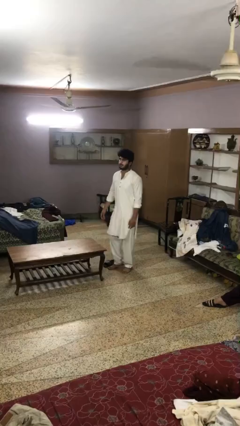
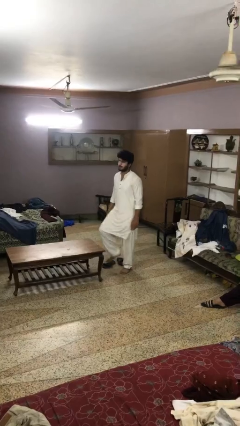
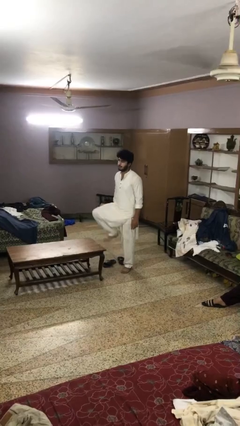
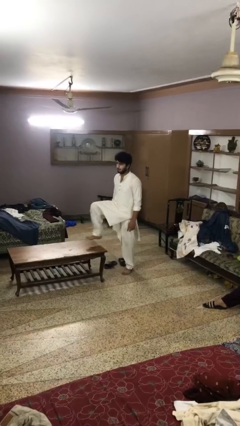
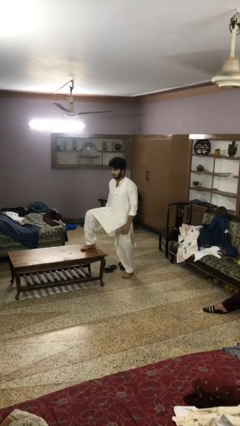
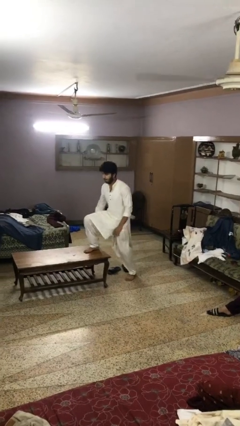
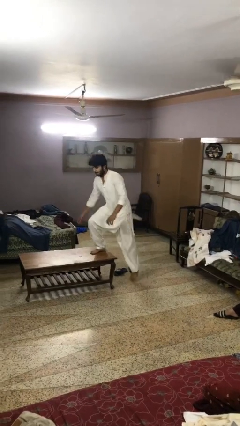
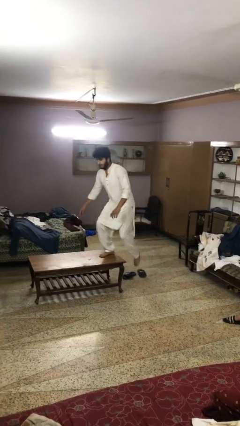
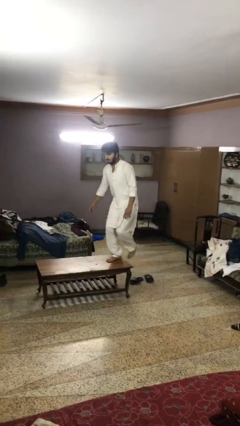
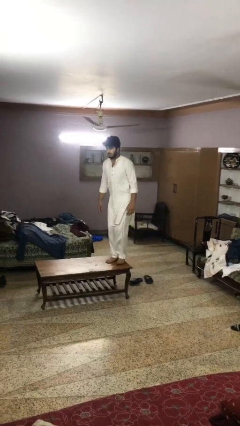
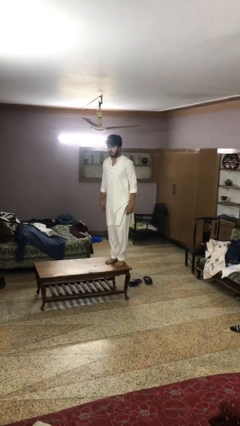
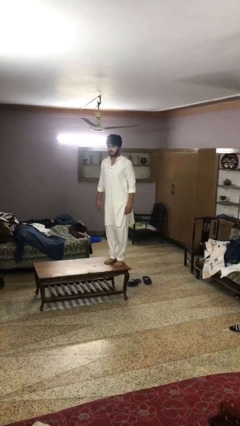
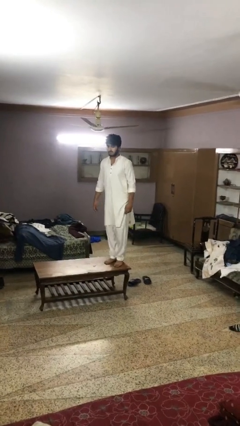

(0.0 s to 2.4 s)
person climbs on table

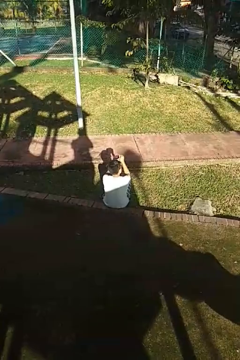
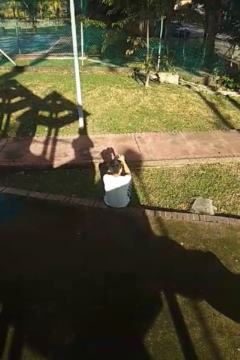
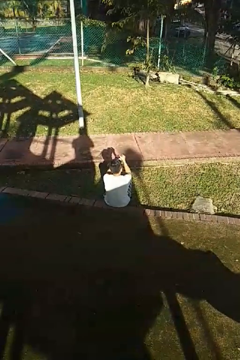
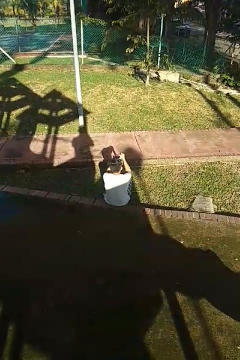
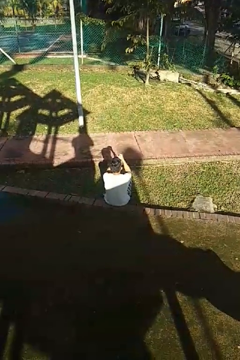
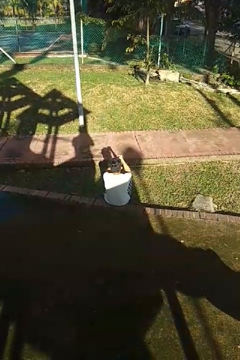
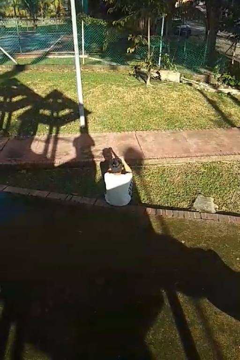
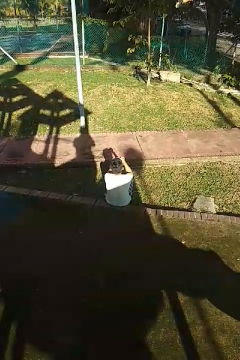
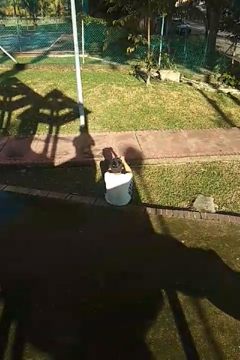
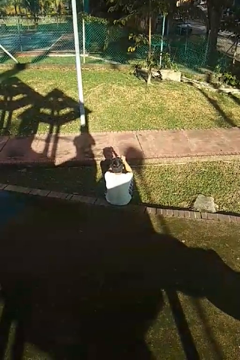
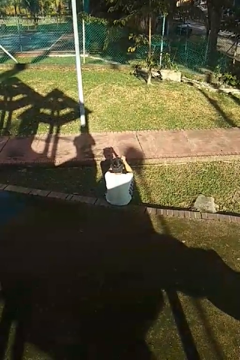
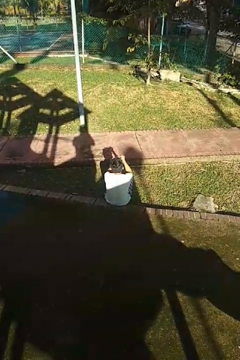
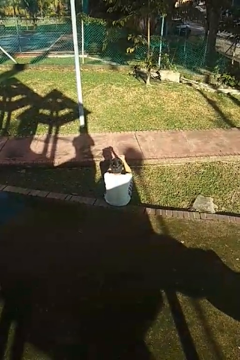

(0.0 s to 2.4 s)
person drinks from mug

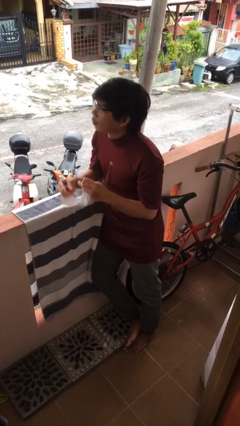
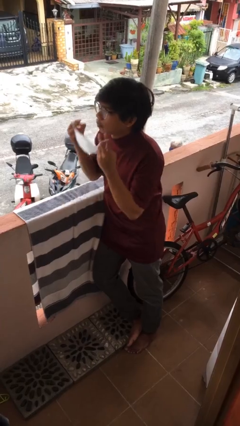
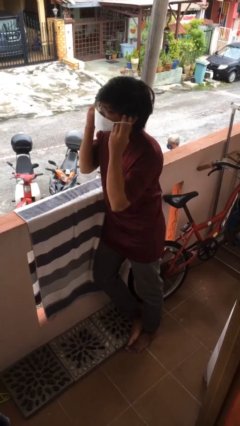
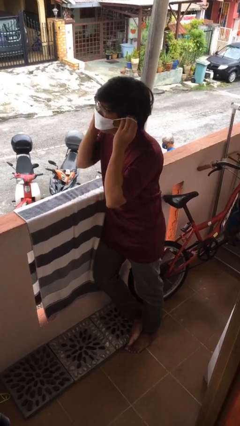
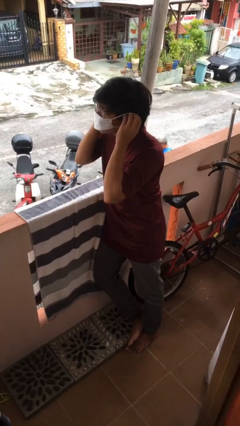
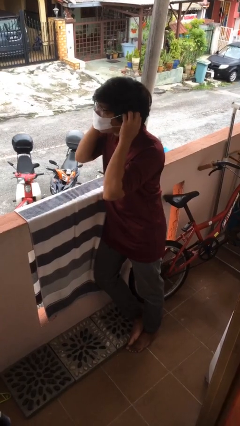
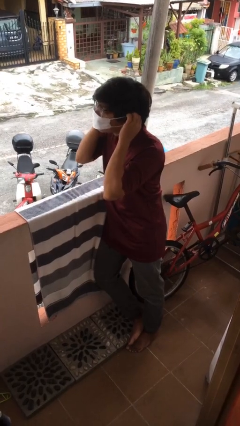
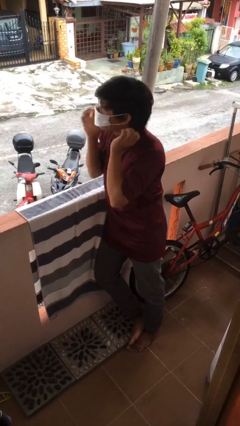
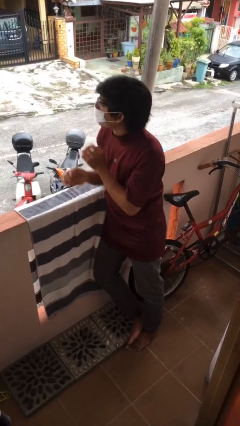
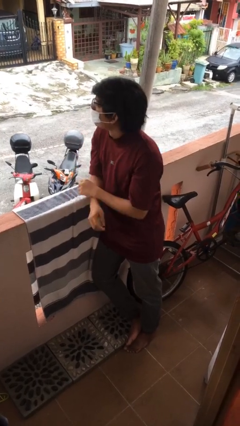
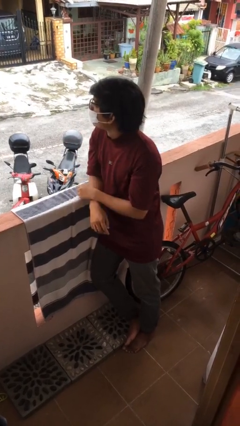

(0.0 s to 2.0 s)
person puts on facemask

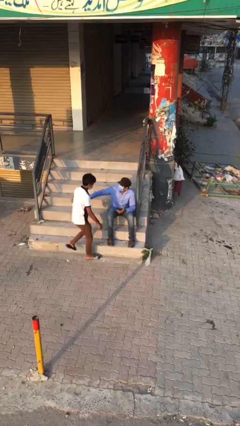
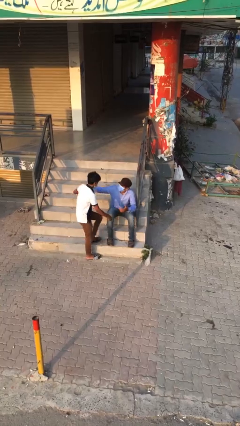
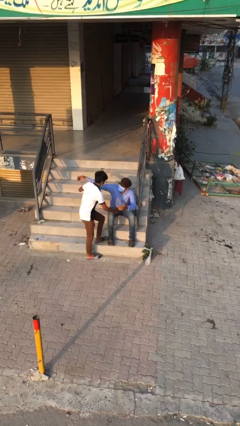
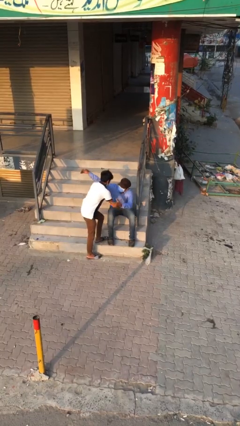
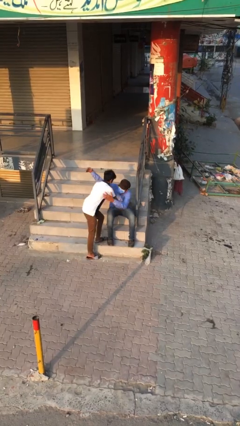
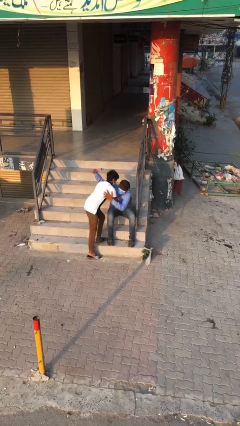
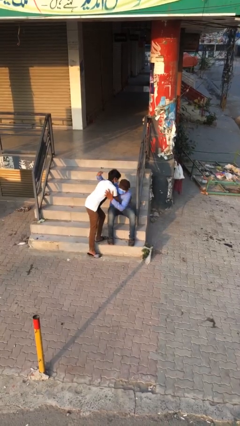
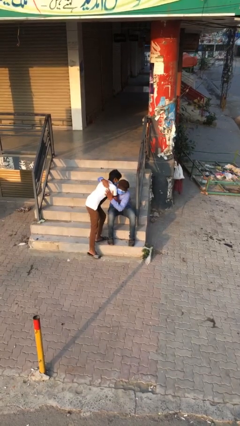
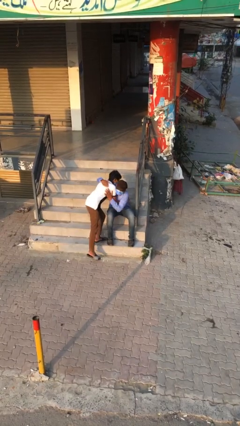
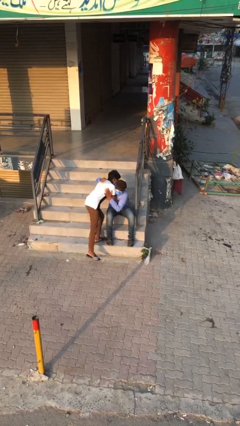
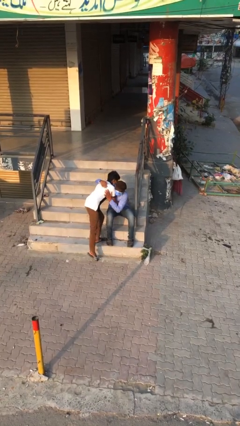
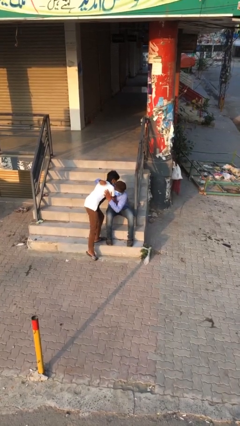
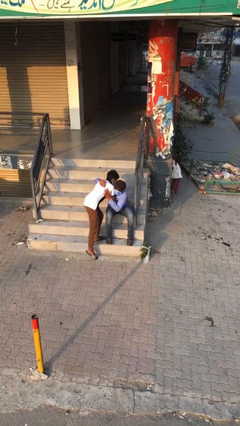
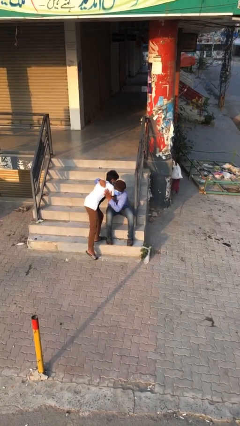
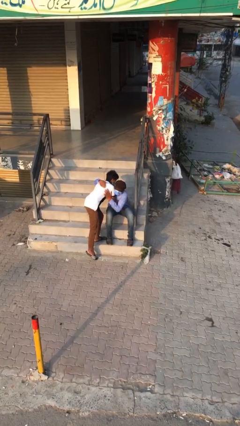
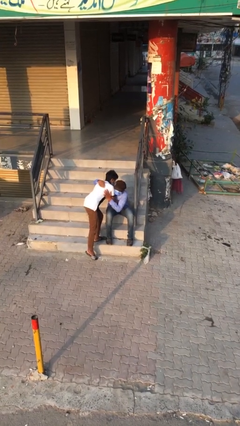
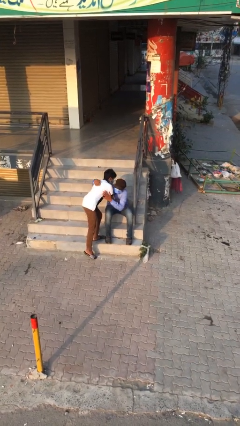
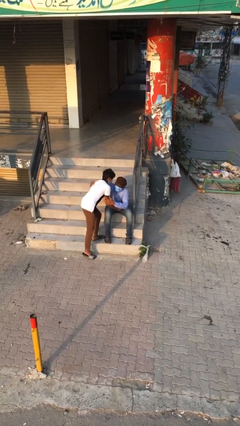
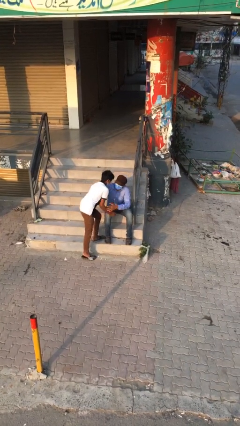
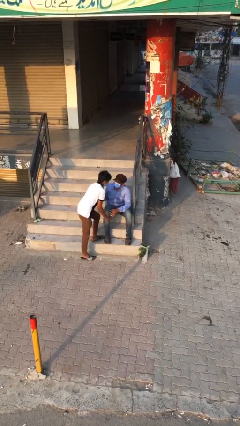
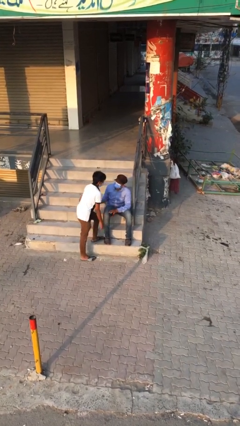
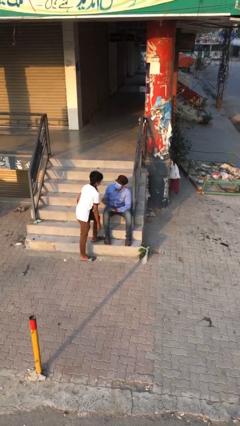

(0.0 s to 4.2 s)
person embraces person

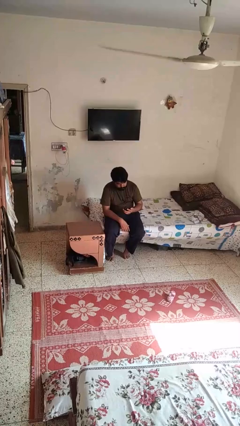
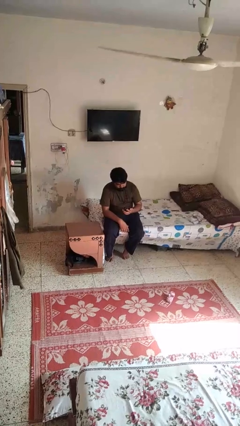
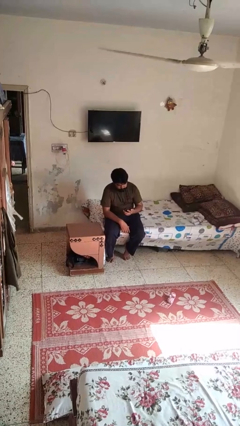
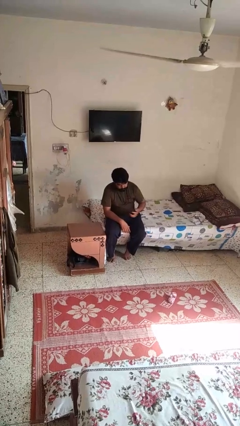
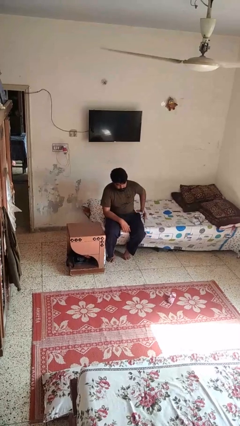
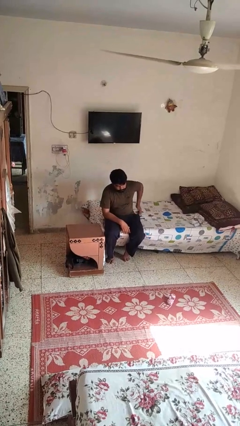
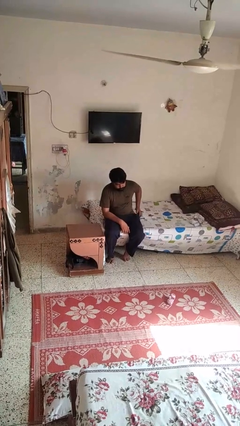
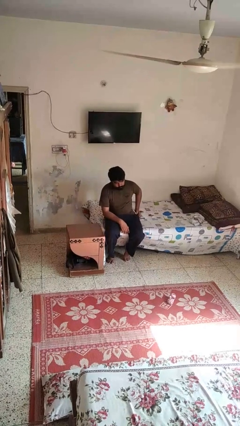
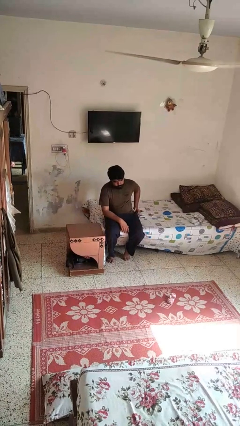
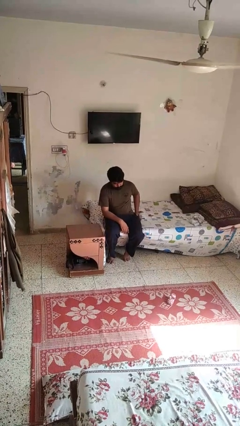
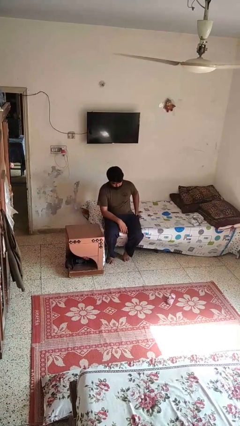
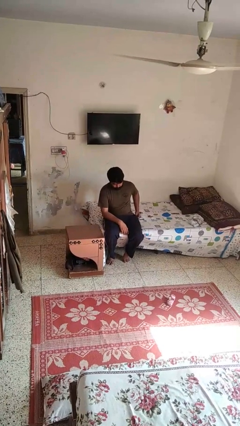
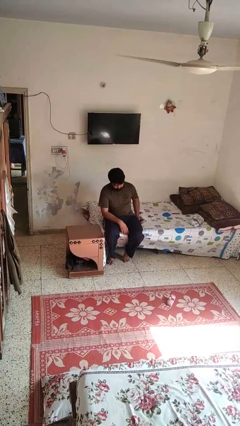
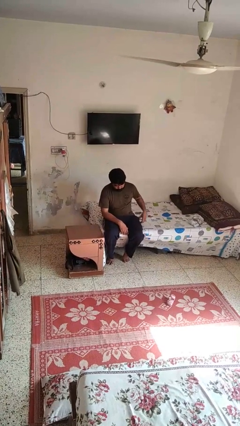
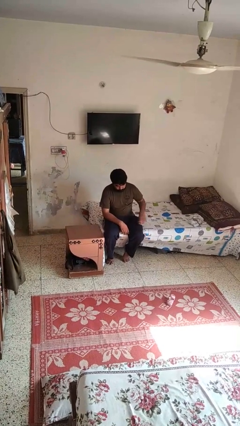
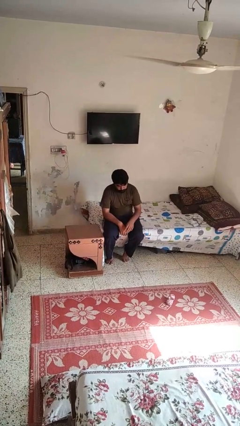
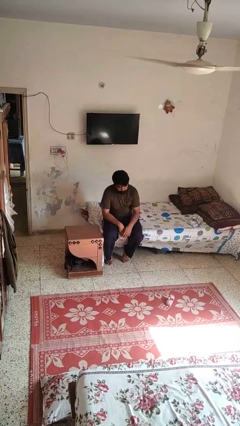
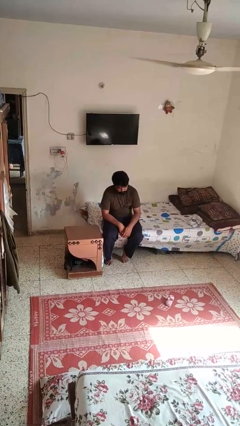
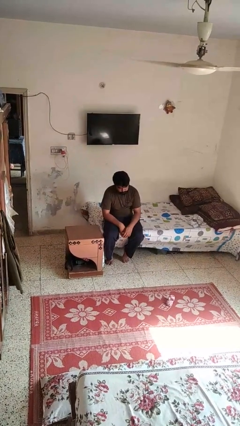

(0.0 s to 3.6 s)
person puts phone into pocket

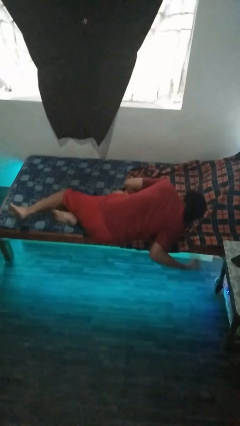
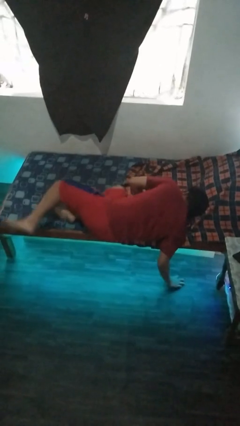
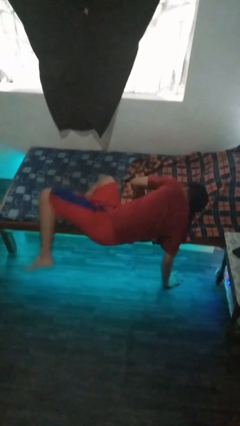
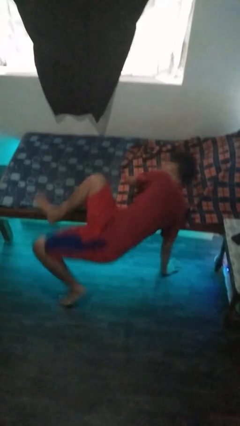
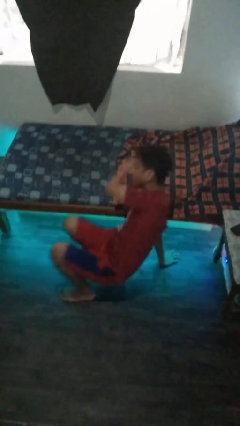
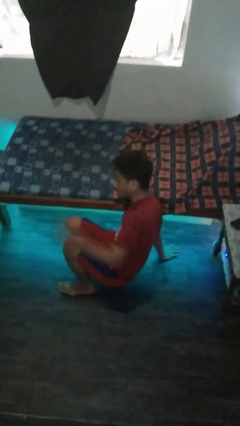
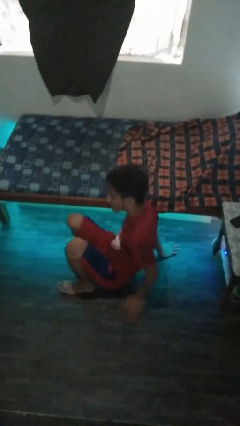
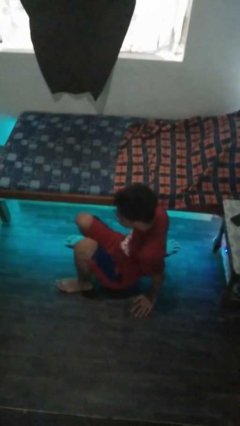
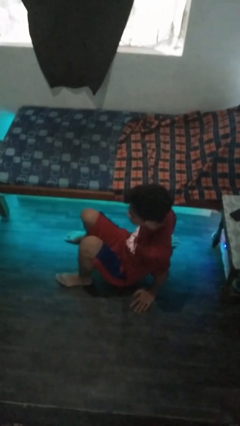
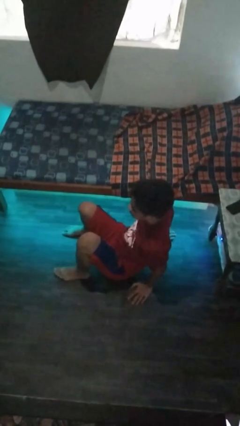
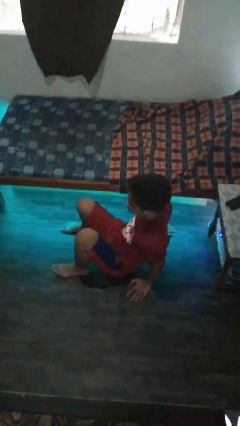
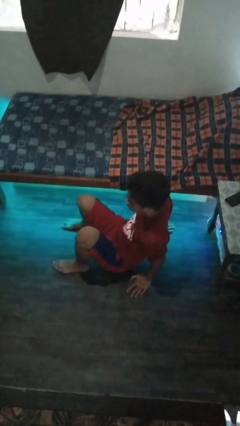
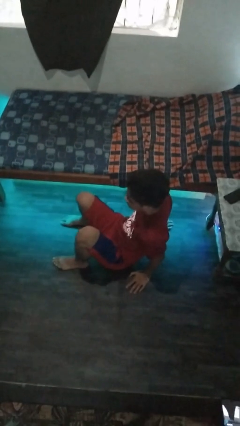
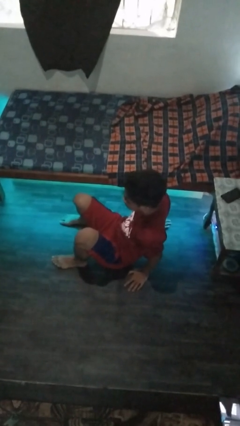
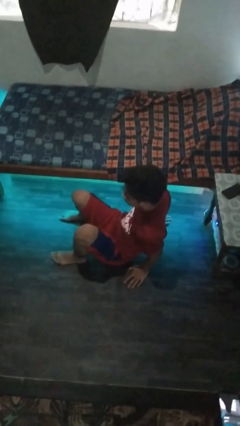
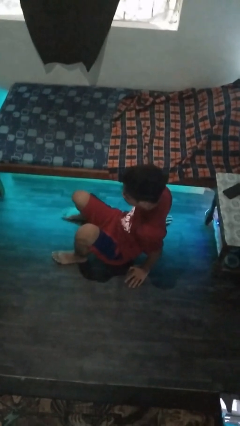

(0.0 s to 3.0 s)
person falls from bed

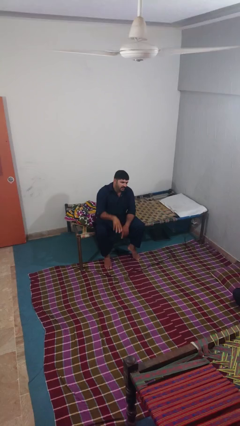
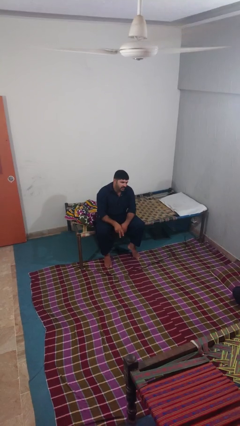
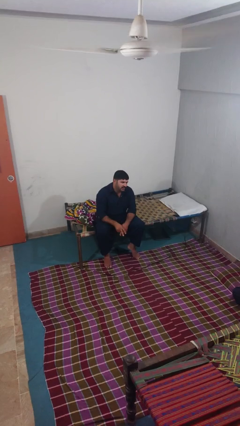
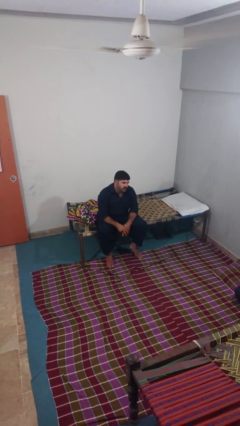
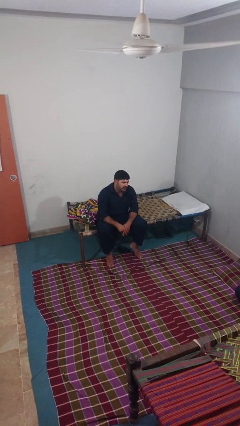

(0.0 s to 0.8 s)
person gestures swipe down
